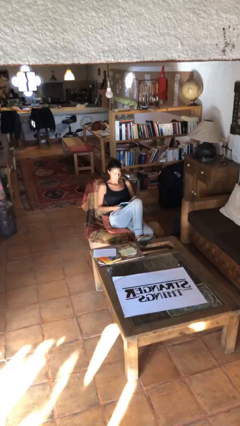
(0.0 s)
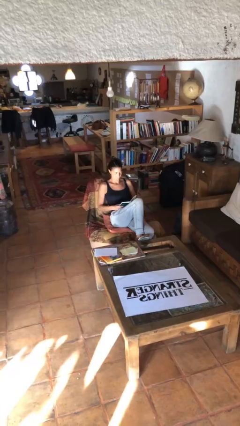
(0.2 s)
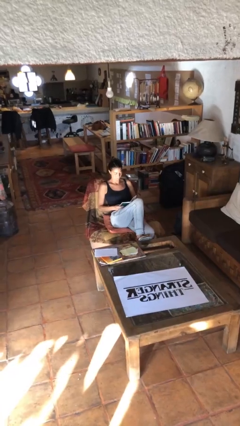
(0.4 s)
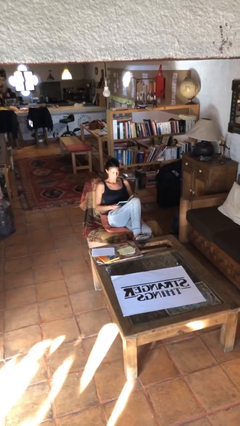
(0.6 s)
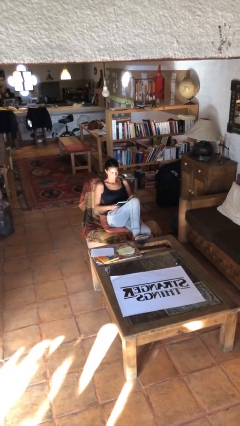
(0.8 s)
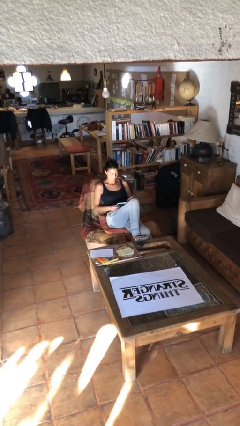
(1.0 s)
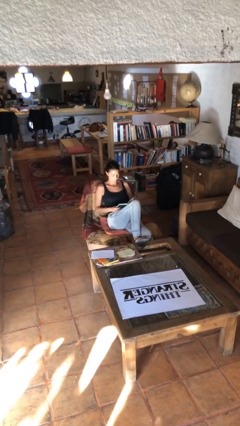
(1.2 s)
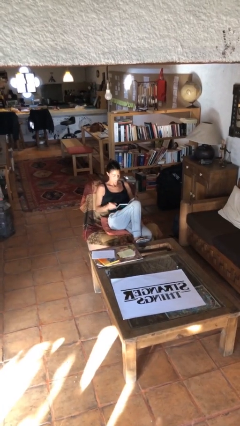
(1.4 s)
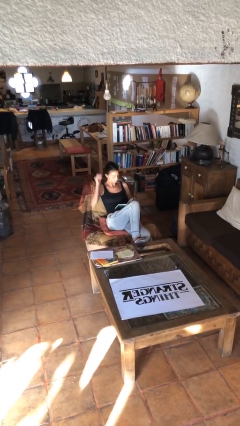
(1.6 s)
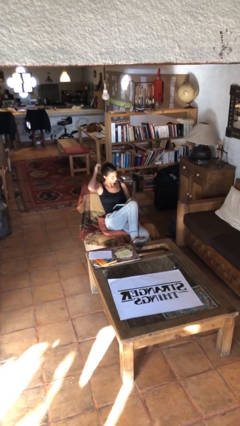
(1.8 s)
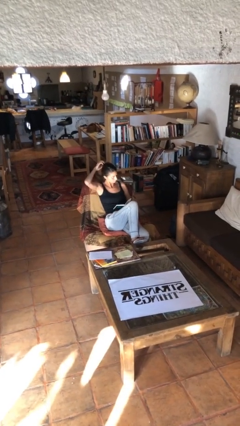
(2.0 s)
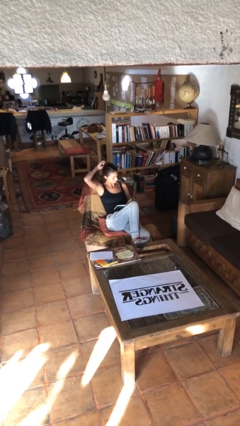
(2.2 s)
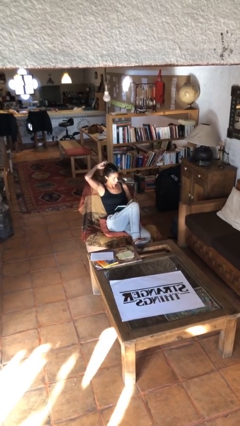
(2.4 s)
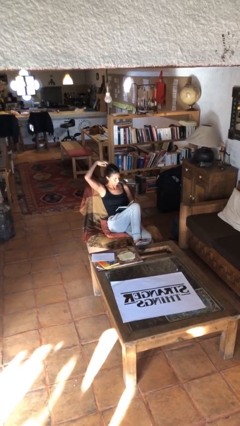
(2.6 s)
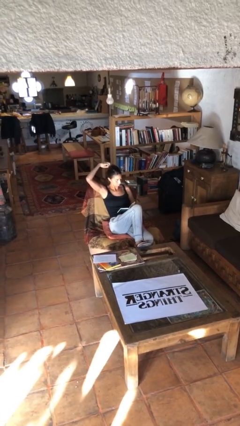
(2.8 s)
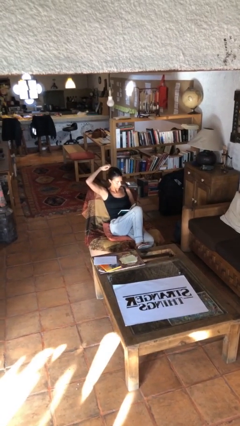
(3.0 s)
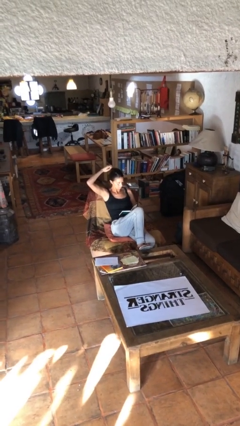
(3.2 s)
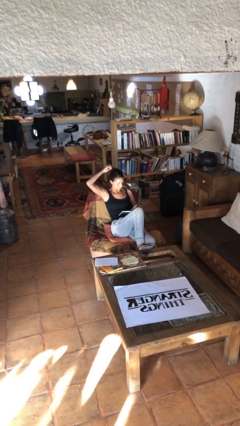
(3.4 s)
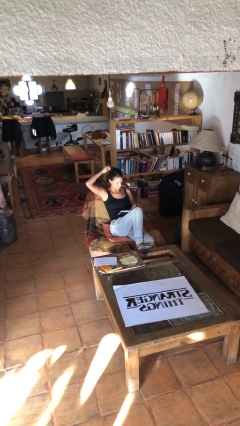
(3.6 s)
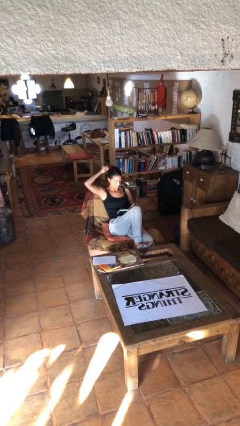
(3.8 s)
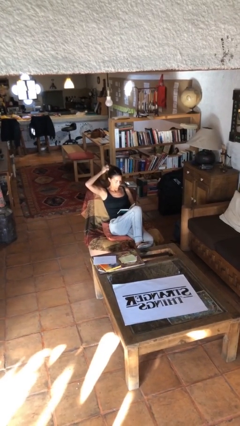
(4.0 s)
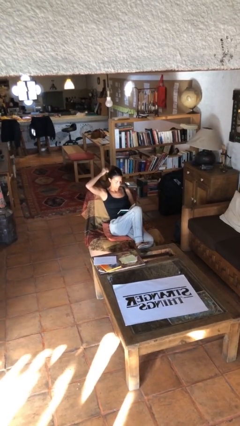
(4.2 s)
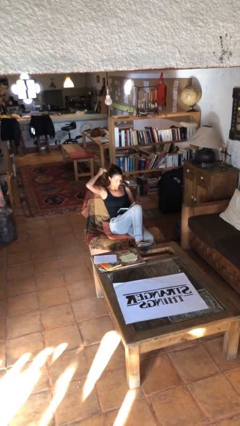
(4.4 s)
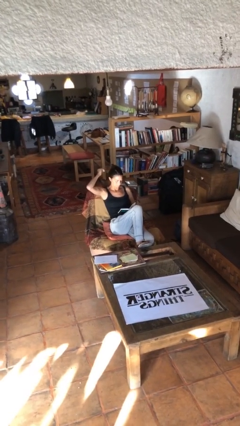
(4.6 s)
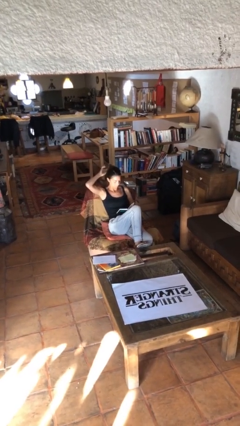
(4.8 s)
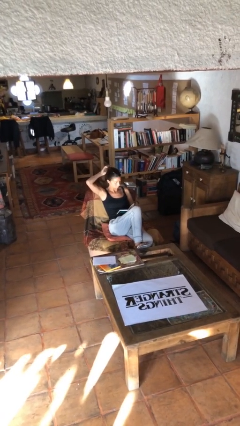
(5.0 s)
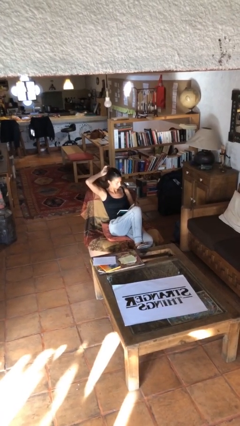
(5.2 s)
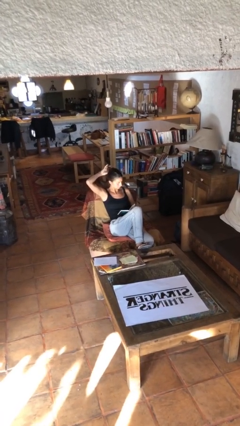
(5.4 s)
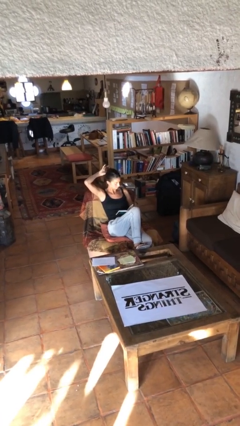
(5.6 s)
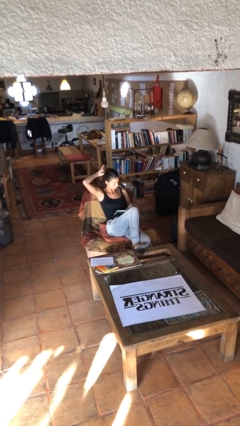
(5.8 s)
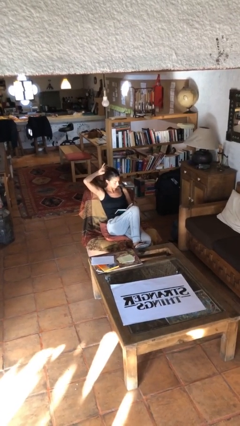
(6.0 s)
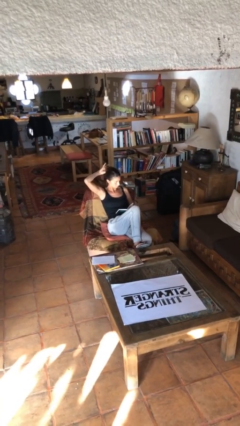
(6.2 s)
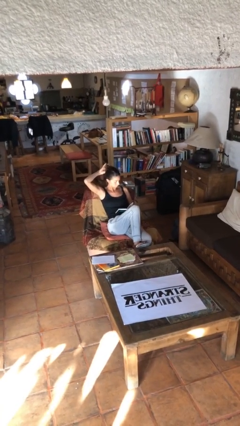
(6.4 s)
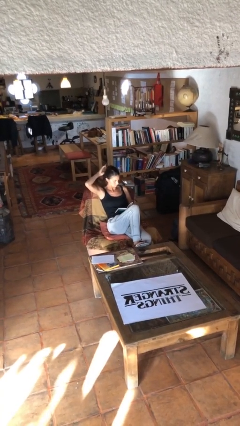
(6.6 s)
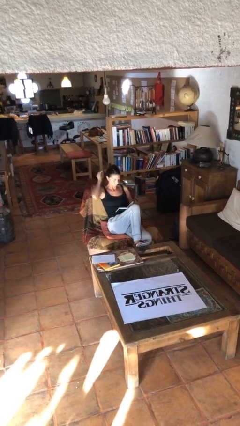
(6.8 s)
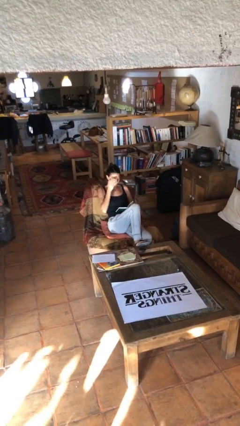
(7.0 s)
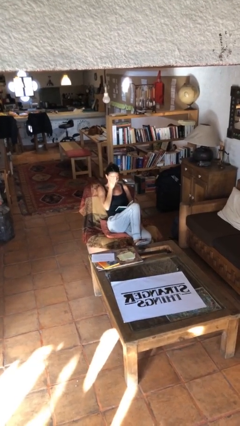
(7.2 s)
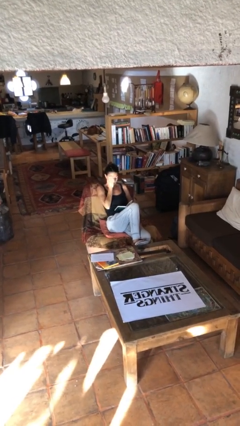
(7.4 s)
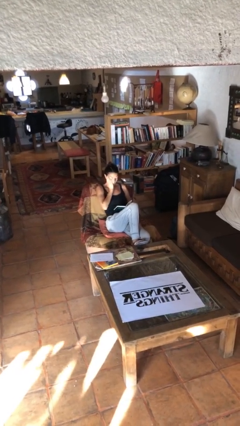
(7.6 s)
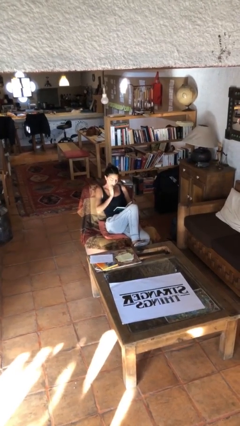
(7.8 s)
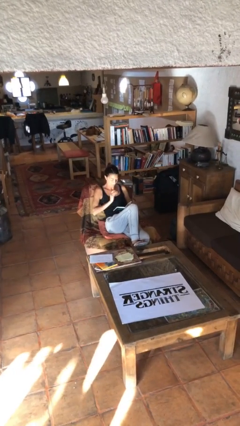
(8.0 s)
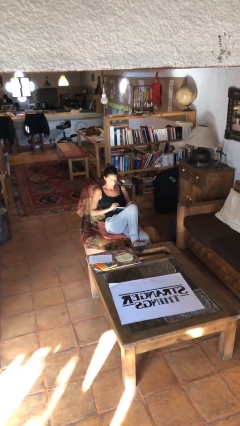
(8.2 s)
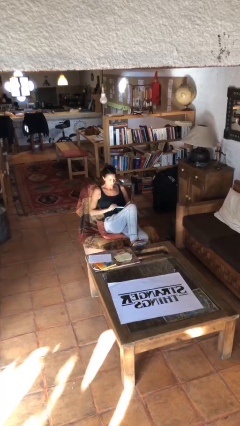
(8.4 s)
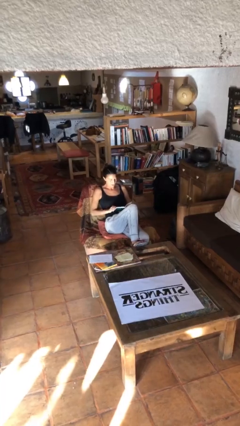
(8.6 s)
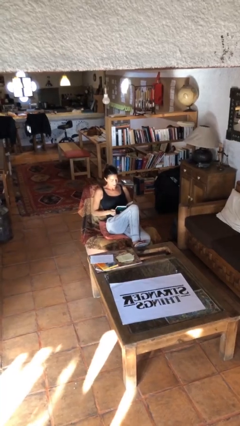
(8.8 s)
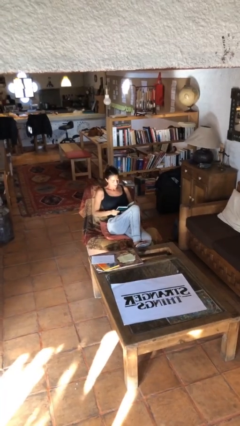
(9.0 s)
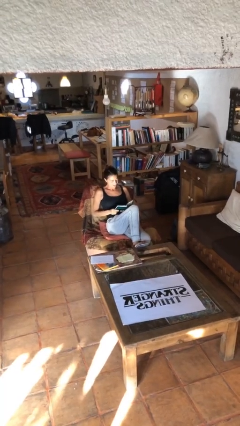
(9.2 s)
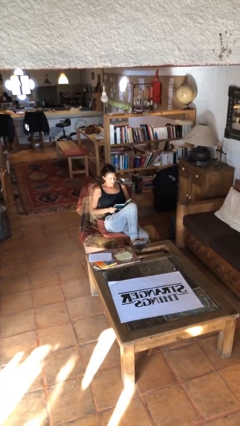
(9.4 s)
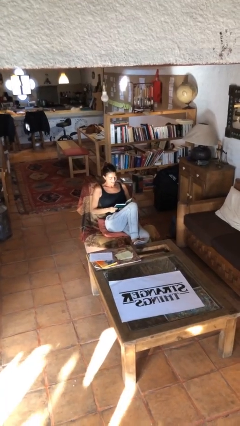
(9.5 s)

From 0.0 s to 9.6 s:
person reads document

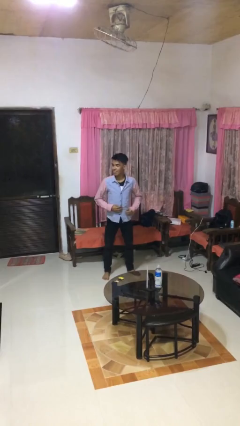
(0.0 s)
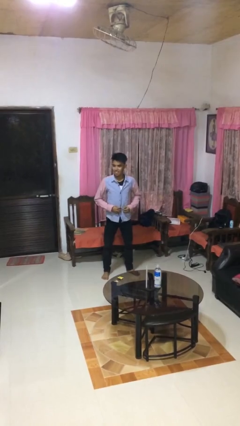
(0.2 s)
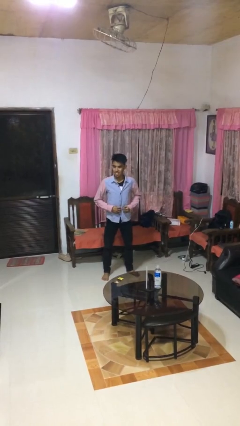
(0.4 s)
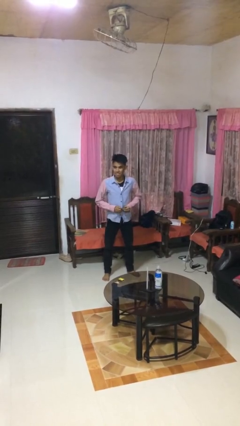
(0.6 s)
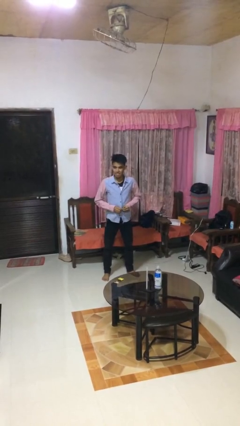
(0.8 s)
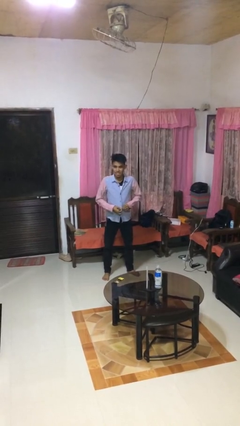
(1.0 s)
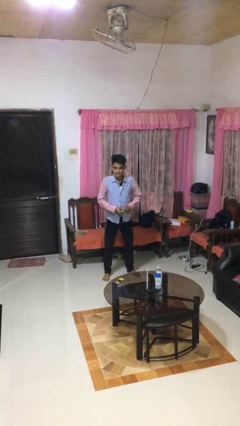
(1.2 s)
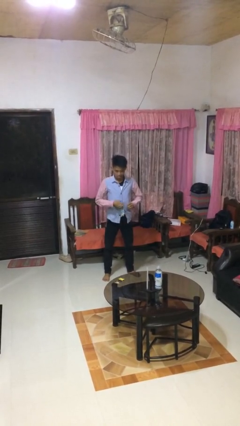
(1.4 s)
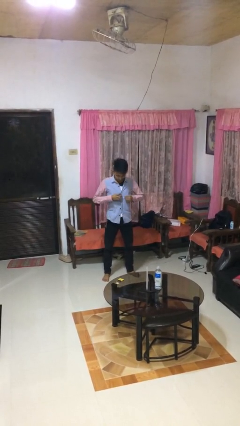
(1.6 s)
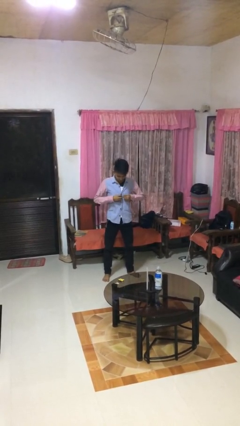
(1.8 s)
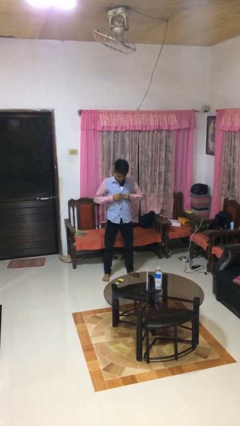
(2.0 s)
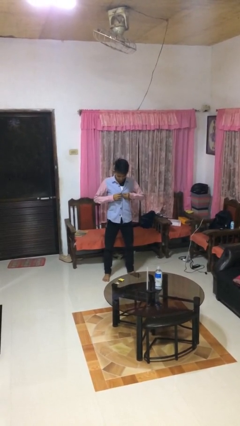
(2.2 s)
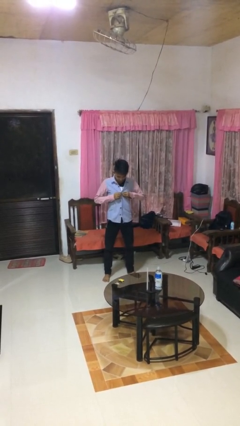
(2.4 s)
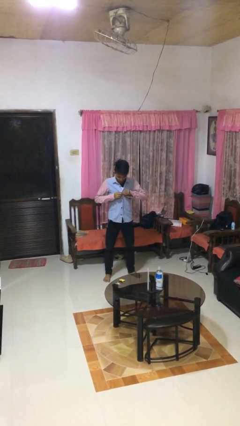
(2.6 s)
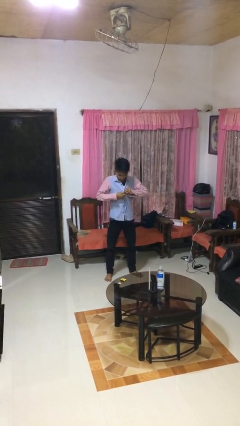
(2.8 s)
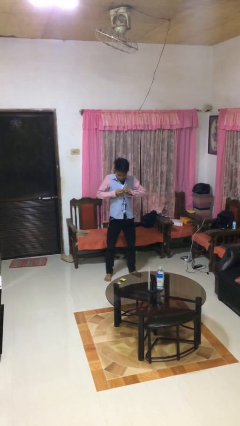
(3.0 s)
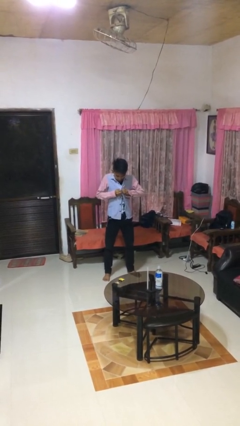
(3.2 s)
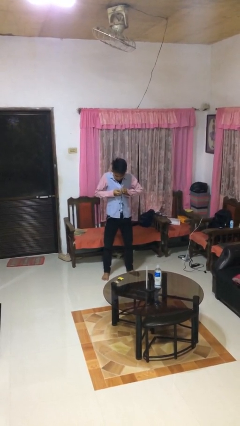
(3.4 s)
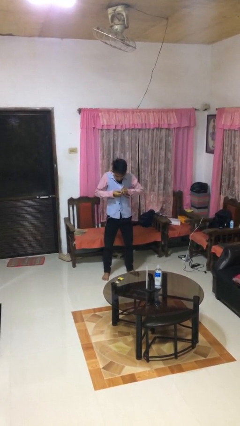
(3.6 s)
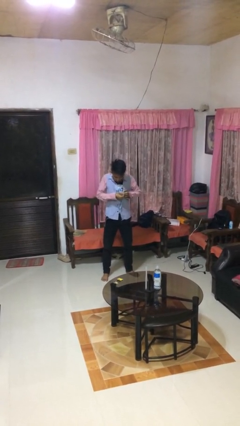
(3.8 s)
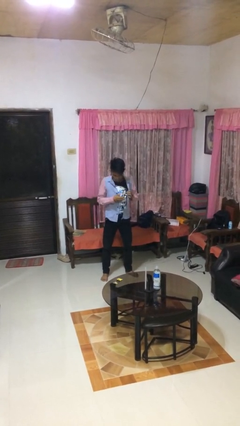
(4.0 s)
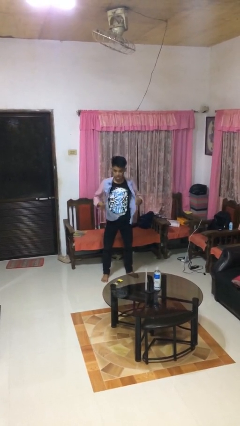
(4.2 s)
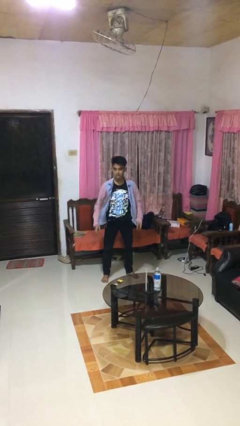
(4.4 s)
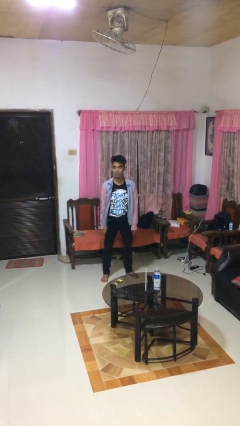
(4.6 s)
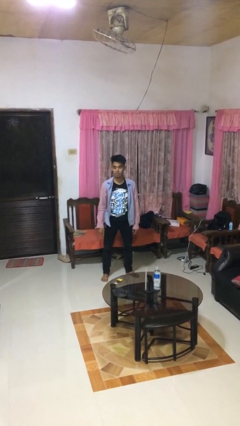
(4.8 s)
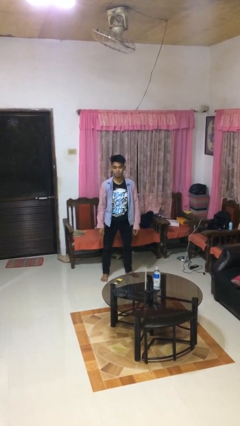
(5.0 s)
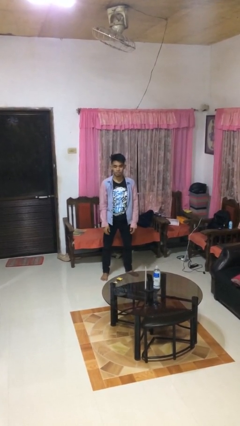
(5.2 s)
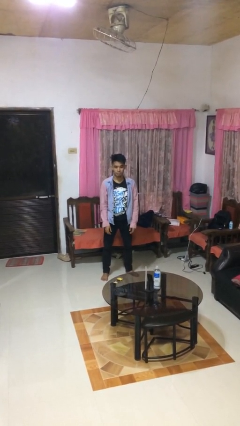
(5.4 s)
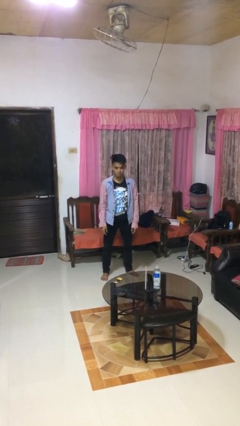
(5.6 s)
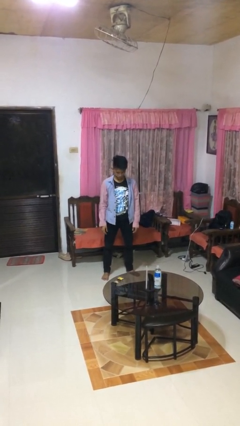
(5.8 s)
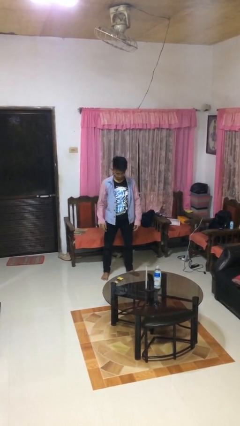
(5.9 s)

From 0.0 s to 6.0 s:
person unbuttons shirt

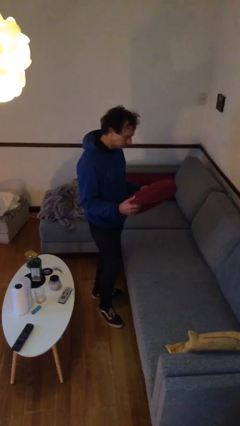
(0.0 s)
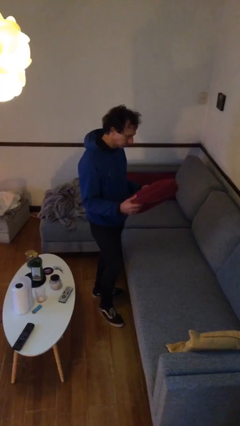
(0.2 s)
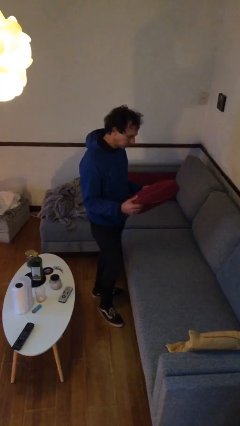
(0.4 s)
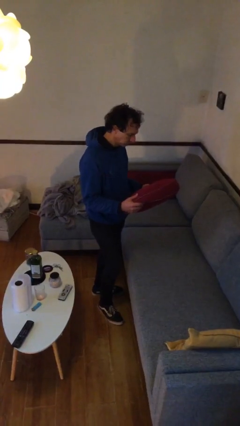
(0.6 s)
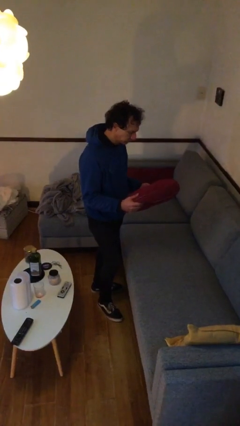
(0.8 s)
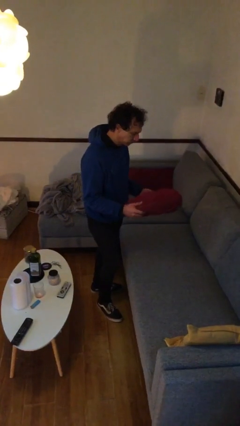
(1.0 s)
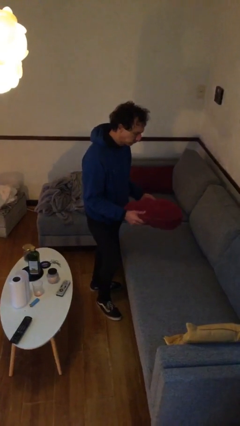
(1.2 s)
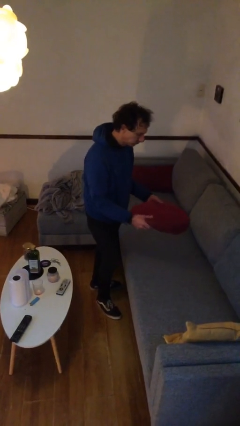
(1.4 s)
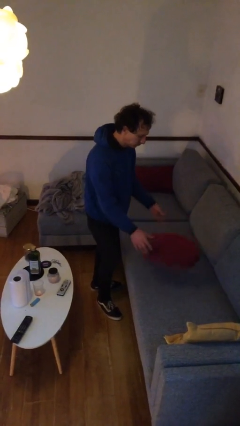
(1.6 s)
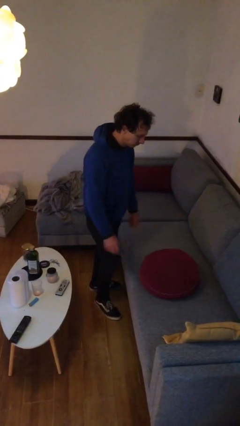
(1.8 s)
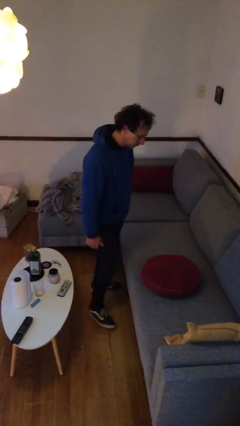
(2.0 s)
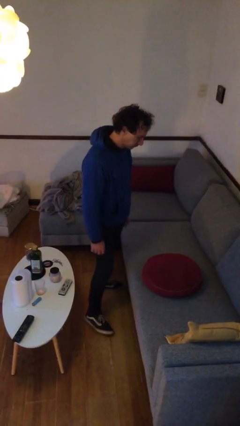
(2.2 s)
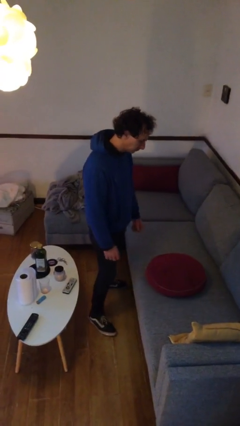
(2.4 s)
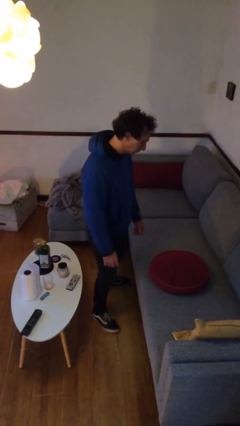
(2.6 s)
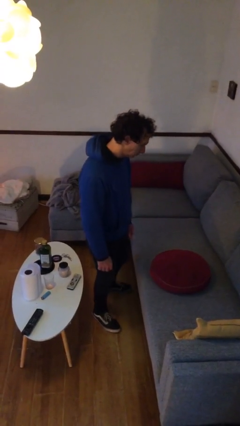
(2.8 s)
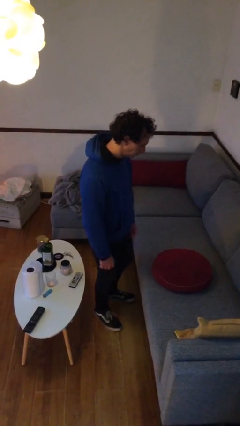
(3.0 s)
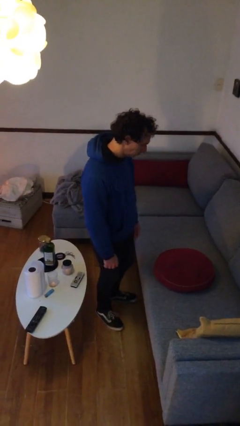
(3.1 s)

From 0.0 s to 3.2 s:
person puts down object on couch
